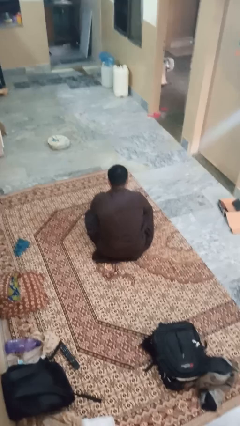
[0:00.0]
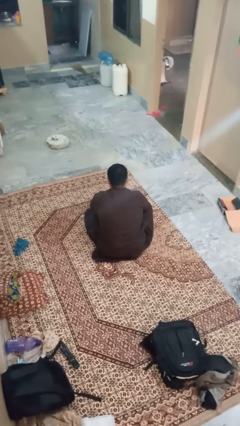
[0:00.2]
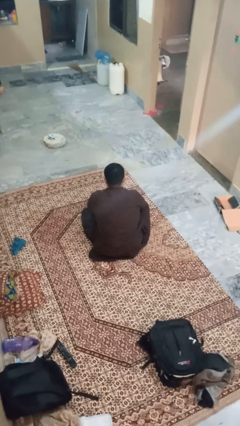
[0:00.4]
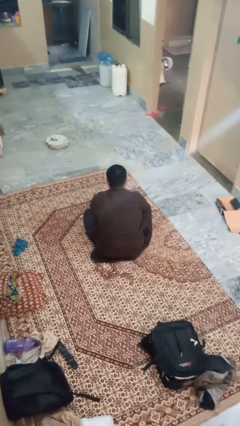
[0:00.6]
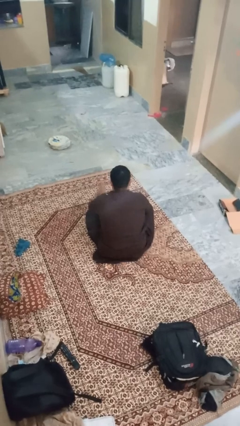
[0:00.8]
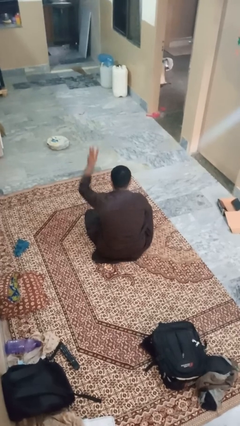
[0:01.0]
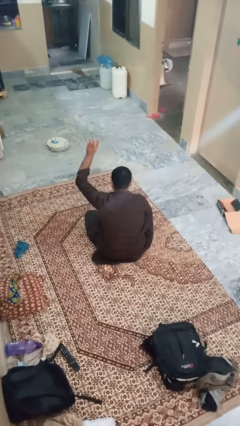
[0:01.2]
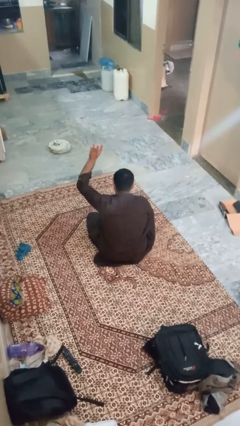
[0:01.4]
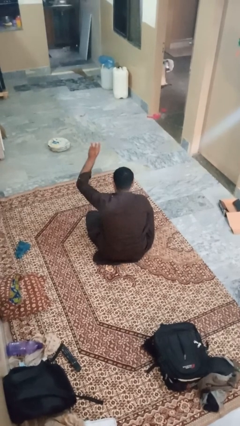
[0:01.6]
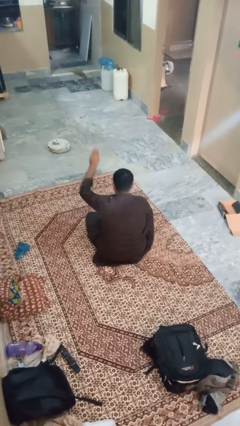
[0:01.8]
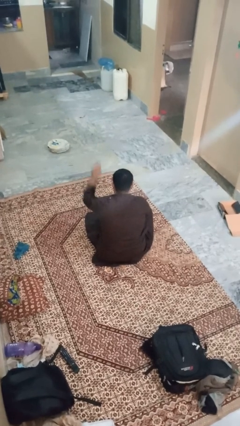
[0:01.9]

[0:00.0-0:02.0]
person gestures number three

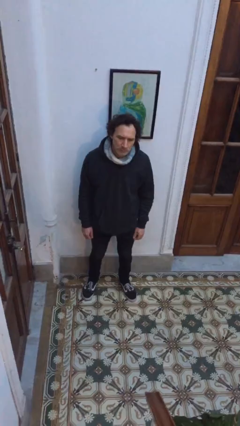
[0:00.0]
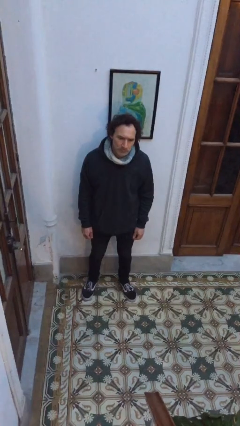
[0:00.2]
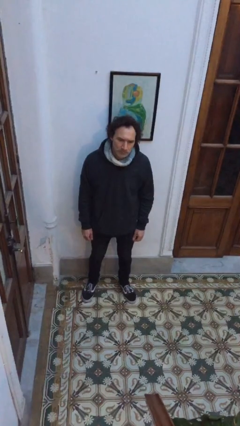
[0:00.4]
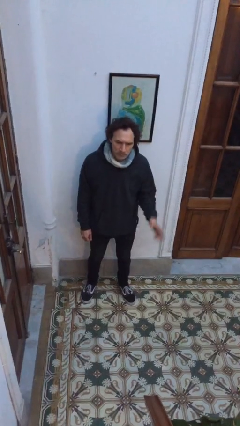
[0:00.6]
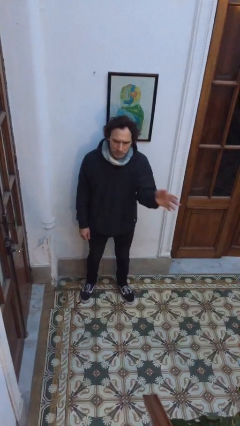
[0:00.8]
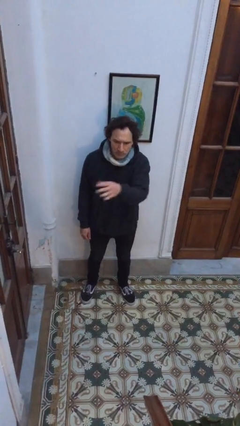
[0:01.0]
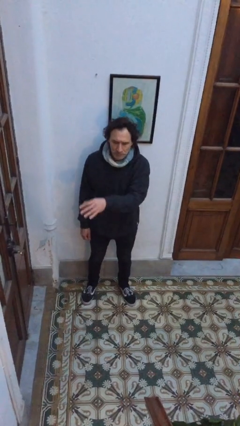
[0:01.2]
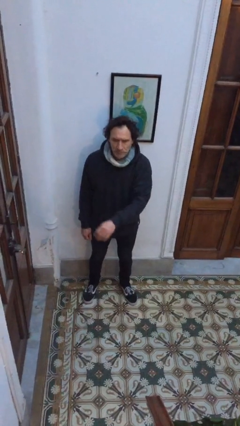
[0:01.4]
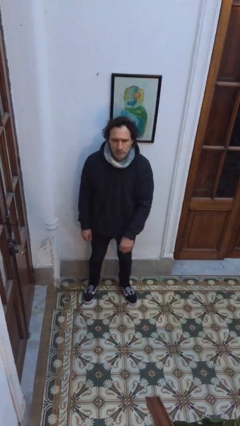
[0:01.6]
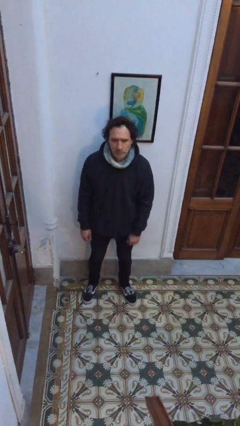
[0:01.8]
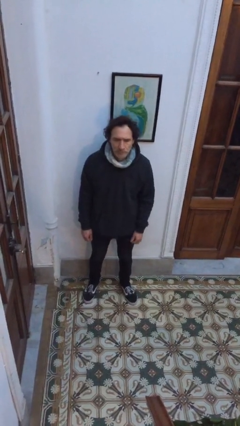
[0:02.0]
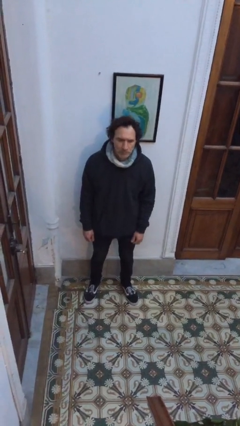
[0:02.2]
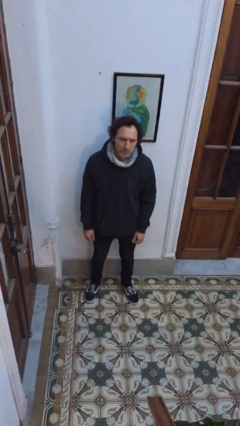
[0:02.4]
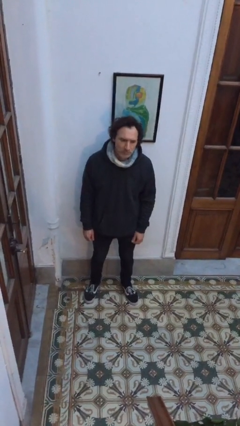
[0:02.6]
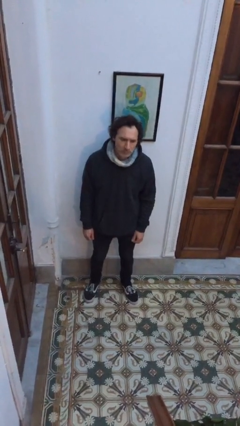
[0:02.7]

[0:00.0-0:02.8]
person gestures swipe right

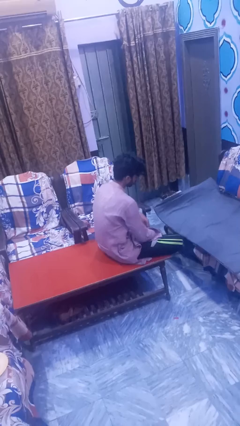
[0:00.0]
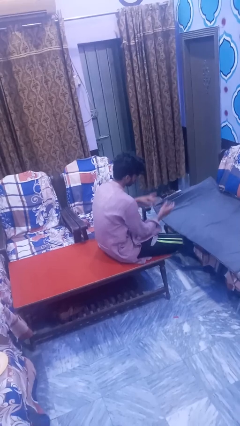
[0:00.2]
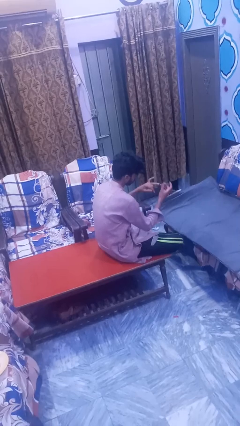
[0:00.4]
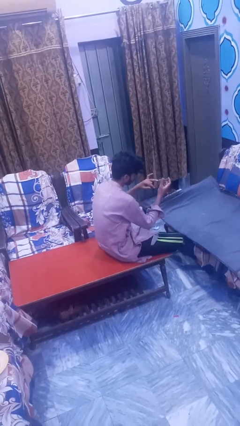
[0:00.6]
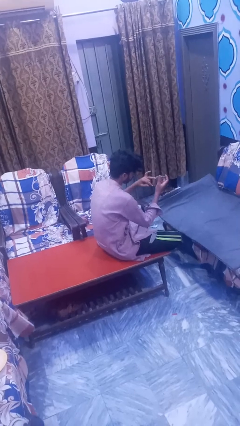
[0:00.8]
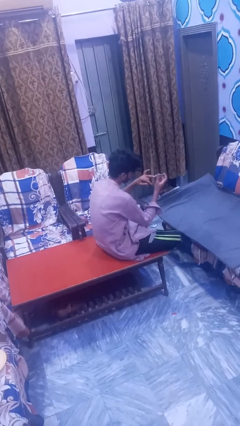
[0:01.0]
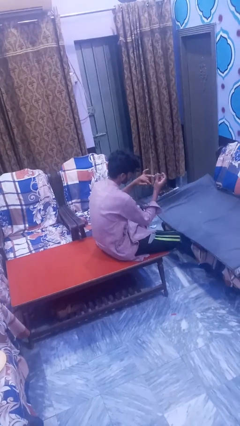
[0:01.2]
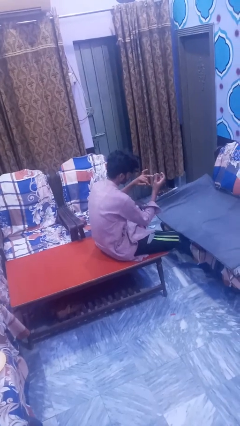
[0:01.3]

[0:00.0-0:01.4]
person clips fingernails

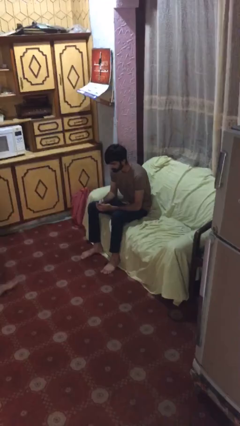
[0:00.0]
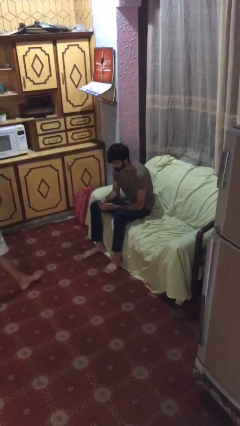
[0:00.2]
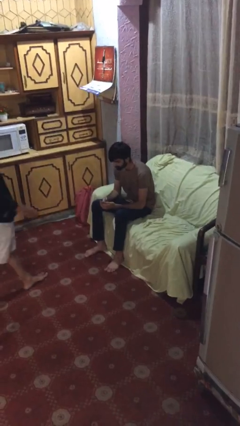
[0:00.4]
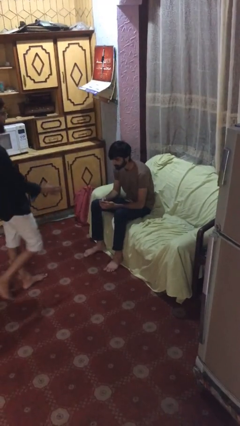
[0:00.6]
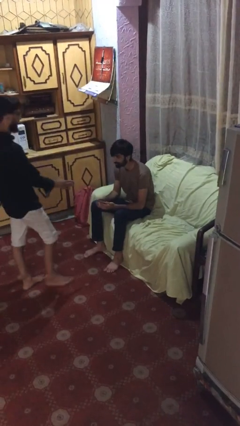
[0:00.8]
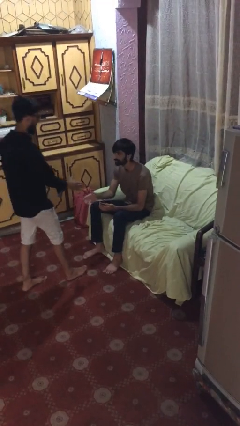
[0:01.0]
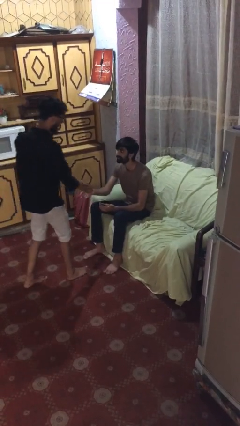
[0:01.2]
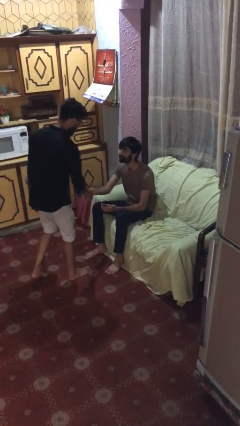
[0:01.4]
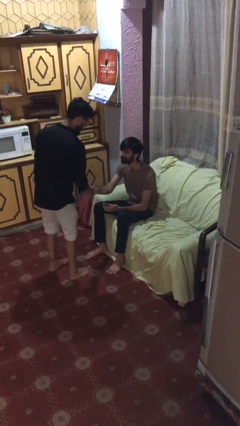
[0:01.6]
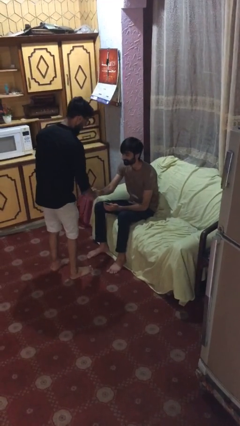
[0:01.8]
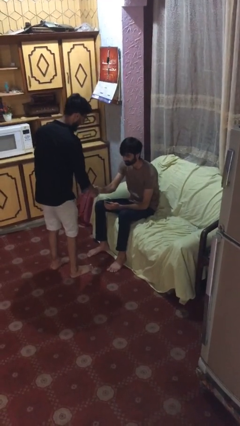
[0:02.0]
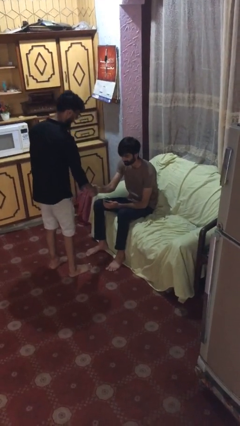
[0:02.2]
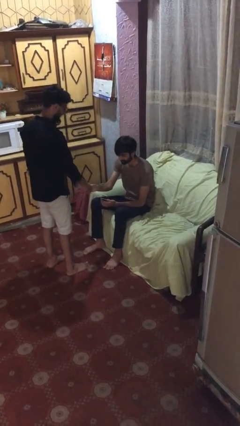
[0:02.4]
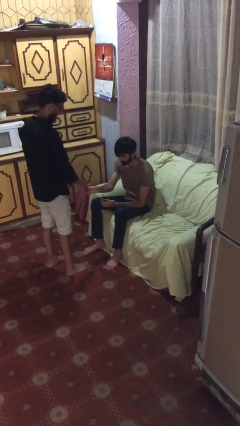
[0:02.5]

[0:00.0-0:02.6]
person shakes hand

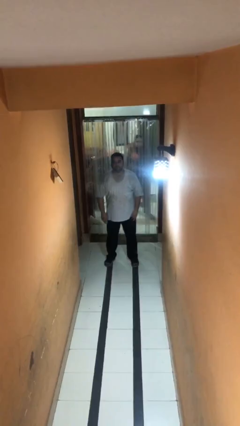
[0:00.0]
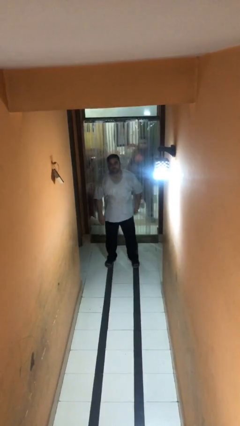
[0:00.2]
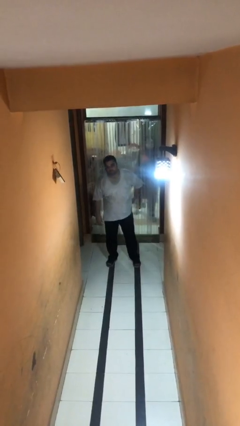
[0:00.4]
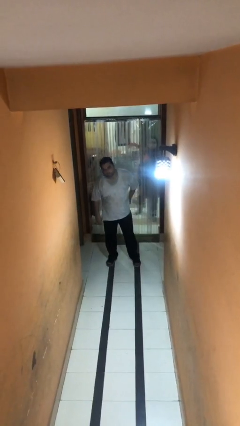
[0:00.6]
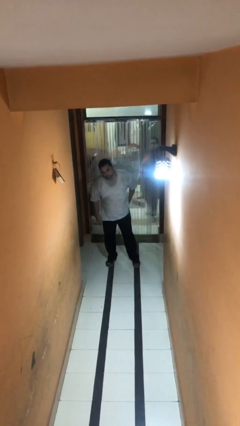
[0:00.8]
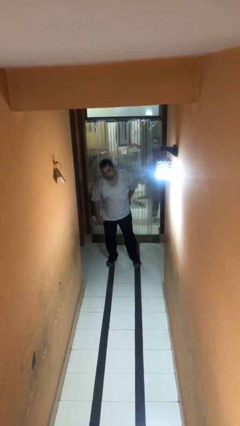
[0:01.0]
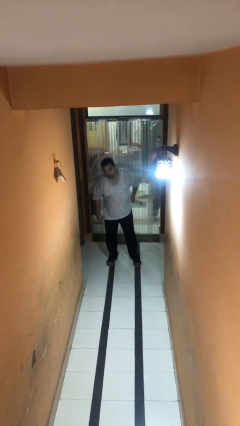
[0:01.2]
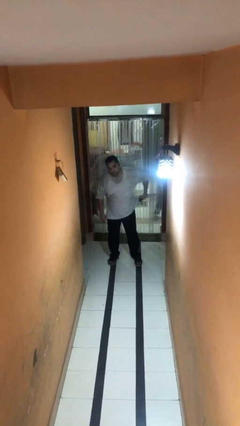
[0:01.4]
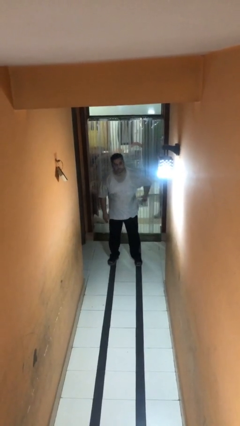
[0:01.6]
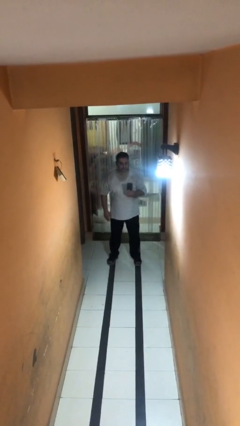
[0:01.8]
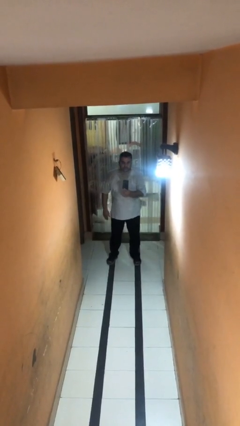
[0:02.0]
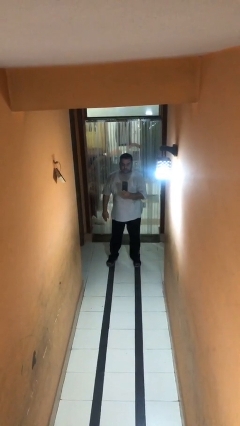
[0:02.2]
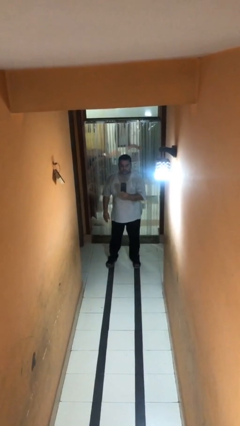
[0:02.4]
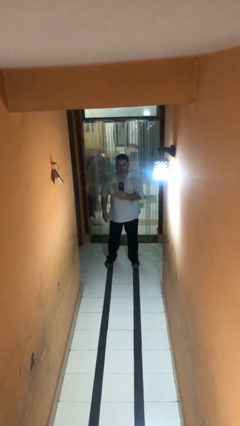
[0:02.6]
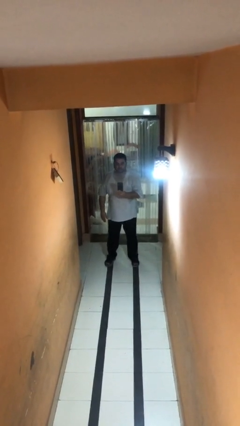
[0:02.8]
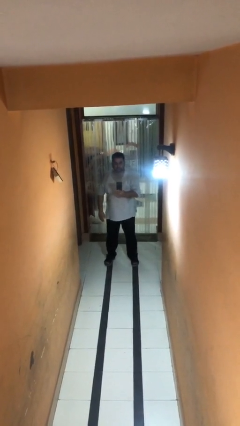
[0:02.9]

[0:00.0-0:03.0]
person takes phone from pocket

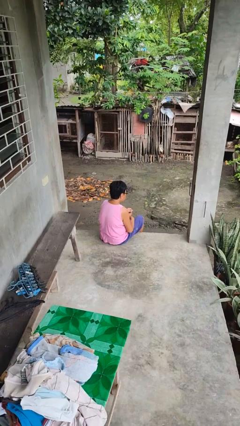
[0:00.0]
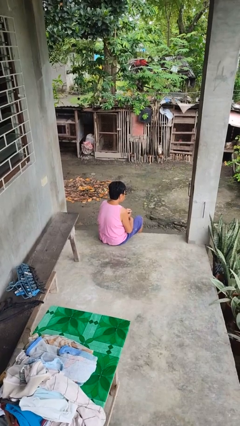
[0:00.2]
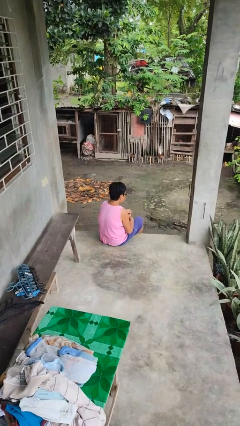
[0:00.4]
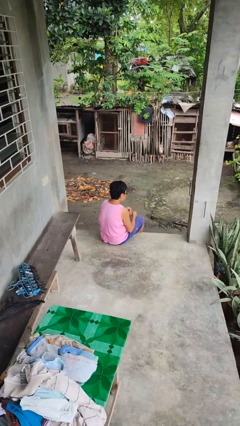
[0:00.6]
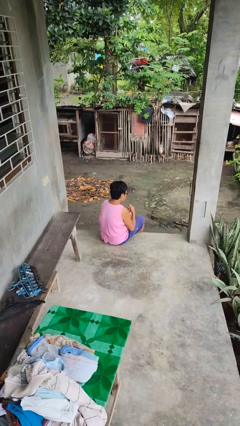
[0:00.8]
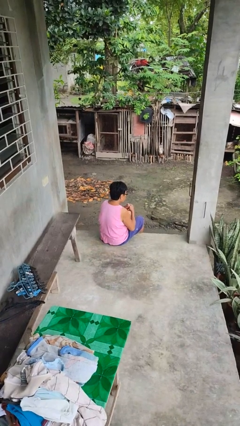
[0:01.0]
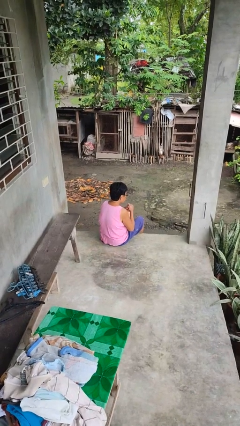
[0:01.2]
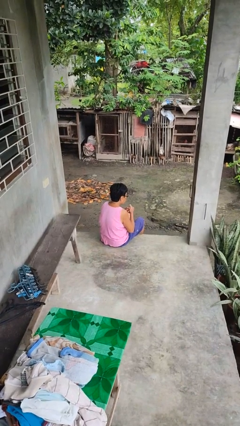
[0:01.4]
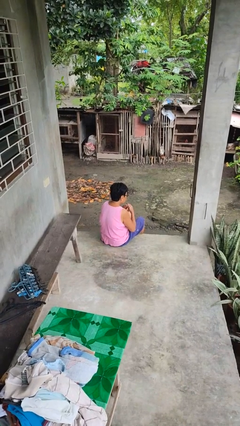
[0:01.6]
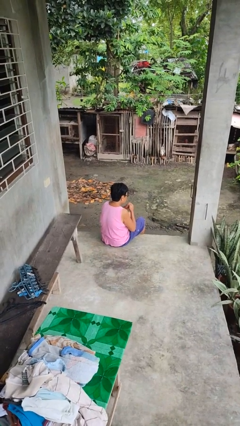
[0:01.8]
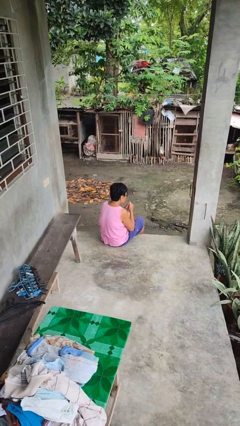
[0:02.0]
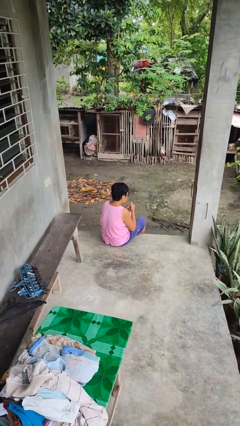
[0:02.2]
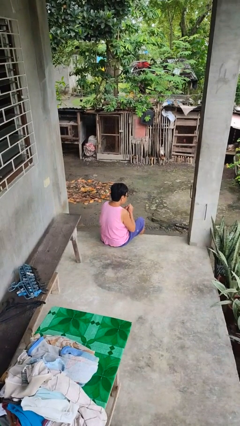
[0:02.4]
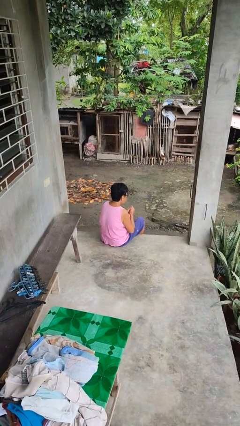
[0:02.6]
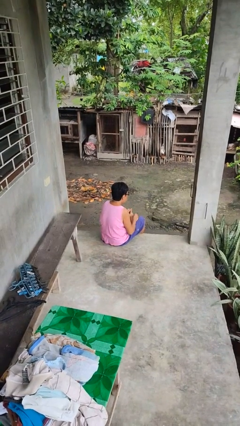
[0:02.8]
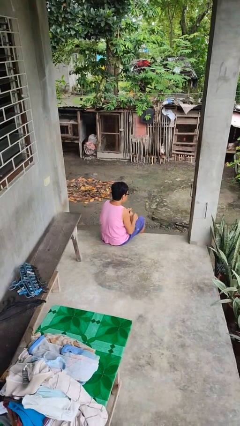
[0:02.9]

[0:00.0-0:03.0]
person cracks knuckles

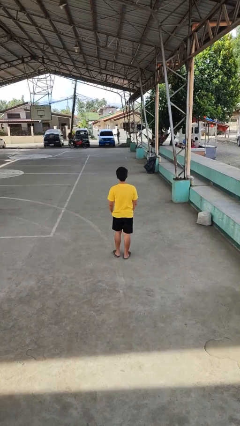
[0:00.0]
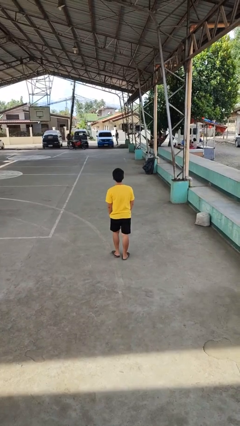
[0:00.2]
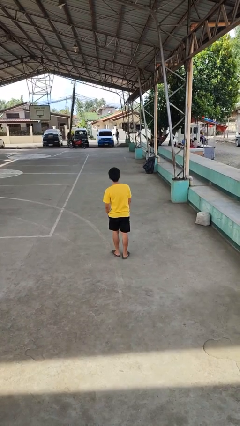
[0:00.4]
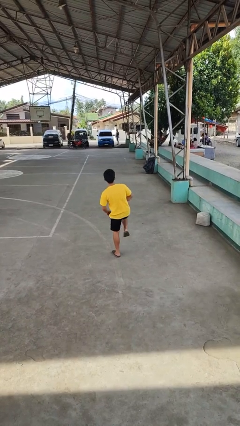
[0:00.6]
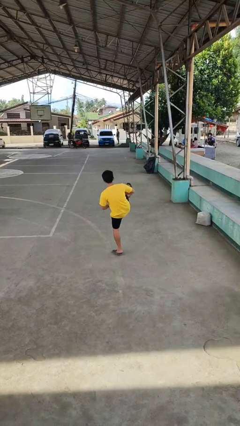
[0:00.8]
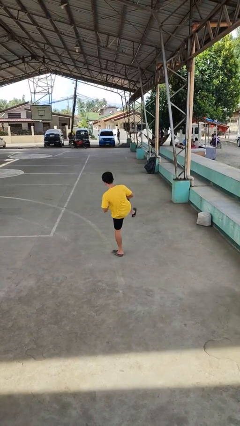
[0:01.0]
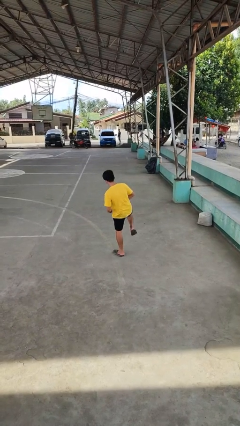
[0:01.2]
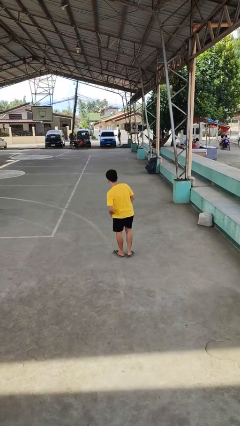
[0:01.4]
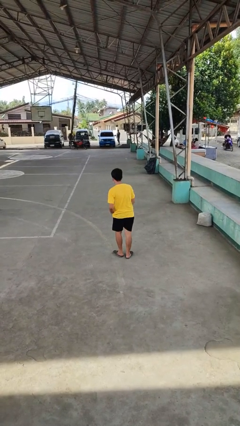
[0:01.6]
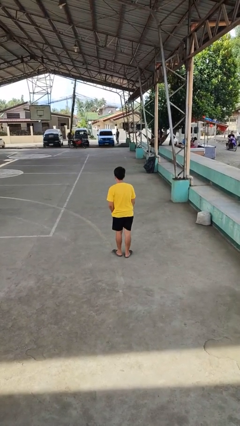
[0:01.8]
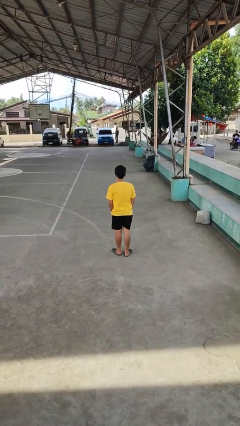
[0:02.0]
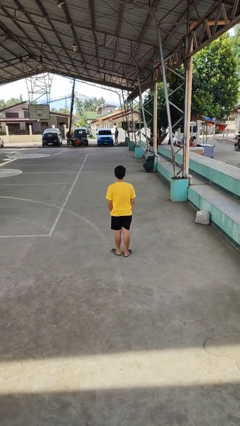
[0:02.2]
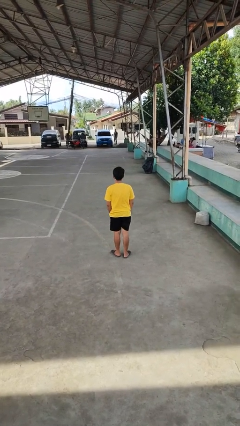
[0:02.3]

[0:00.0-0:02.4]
person karate kicks

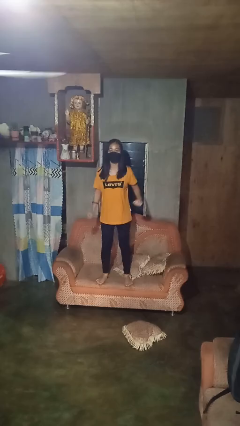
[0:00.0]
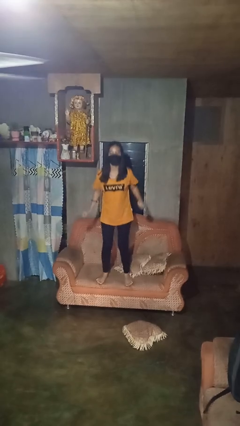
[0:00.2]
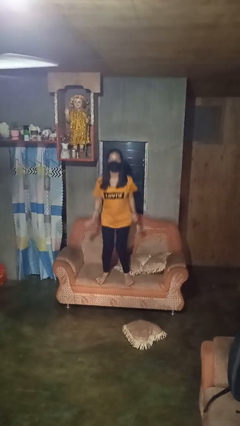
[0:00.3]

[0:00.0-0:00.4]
person jumps on couch
